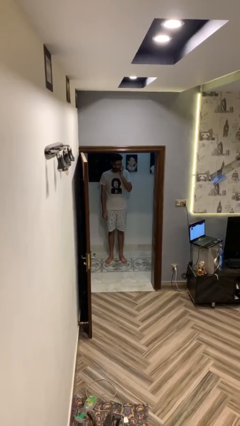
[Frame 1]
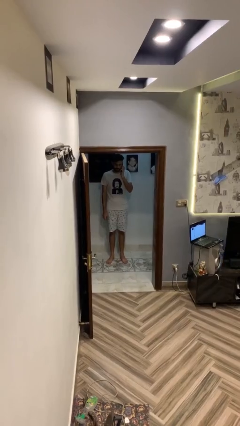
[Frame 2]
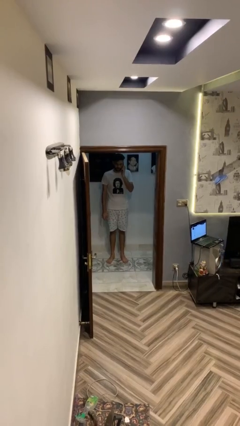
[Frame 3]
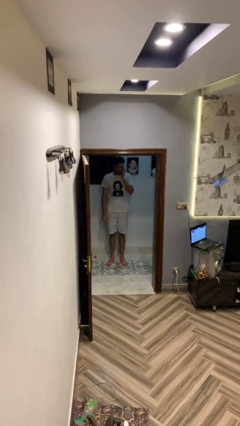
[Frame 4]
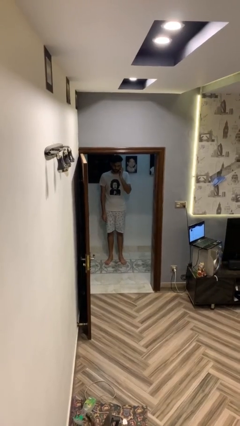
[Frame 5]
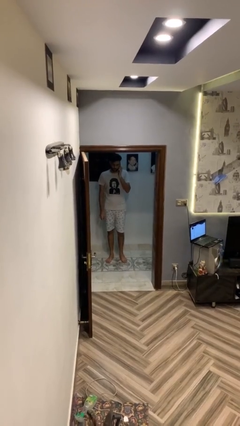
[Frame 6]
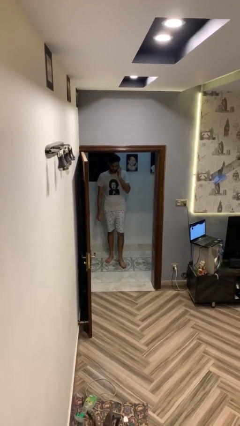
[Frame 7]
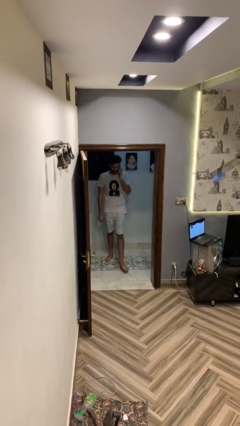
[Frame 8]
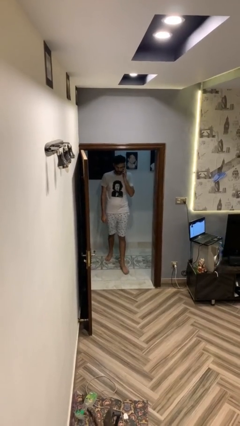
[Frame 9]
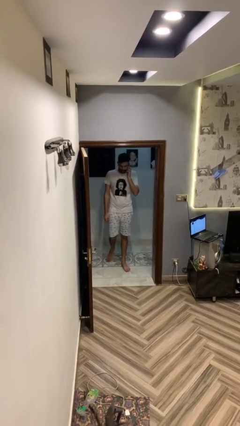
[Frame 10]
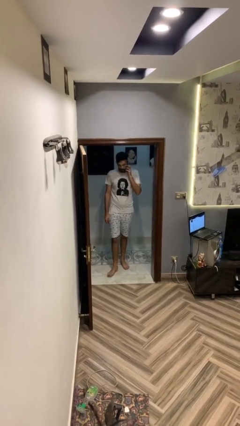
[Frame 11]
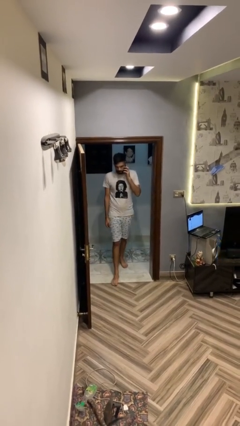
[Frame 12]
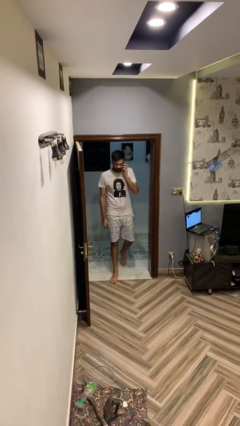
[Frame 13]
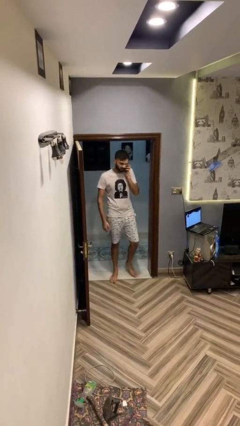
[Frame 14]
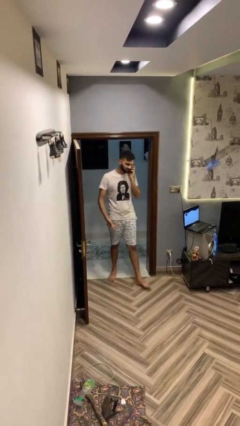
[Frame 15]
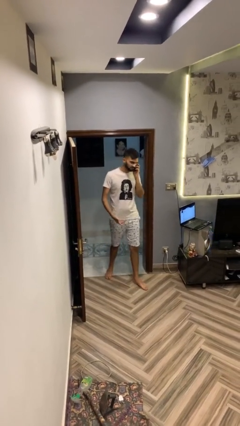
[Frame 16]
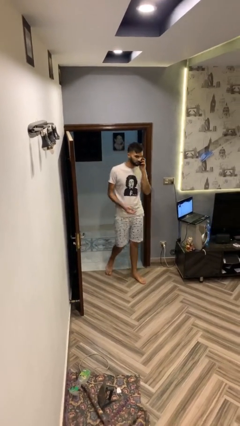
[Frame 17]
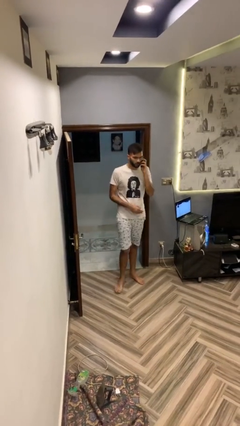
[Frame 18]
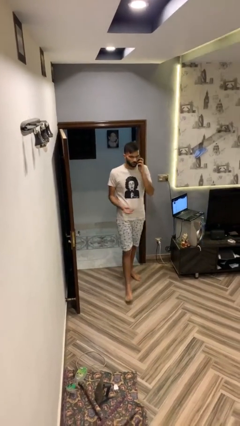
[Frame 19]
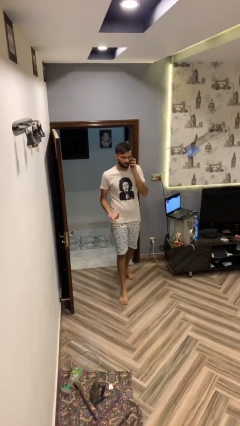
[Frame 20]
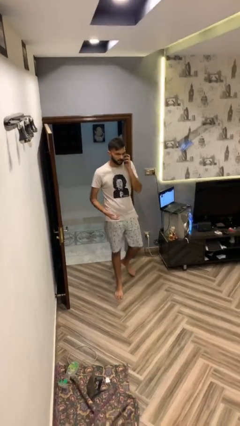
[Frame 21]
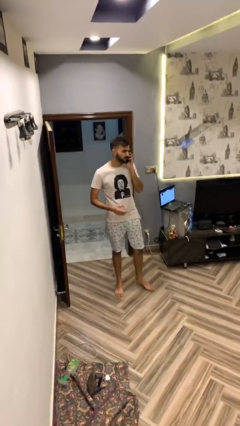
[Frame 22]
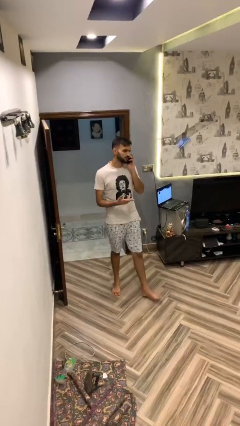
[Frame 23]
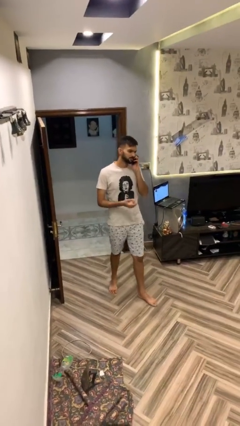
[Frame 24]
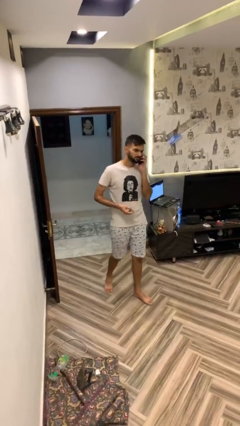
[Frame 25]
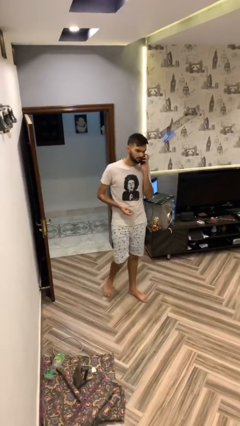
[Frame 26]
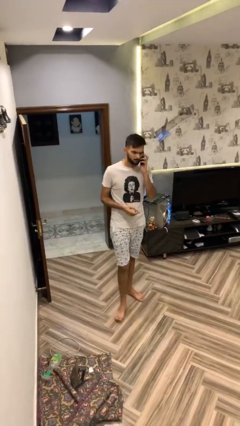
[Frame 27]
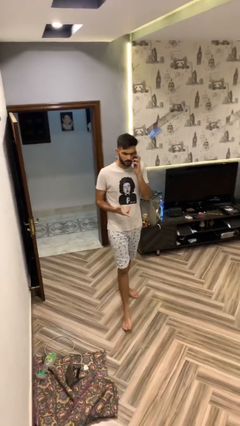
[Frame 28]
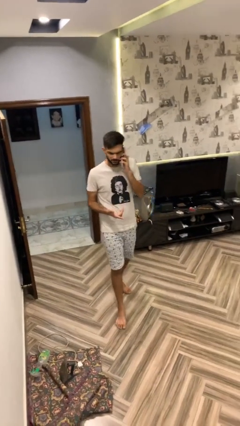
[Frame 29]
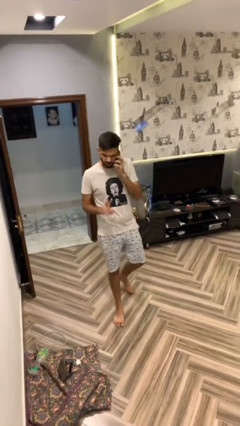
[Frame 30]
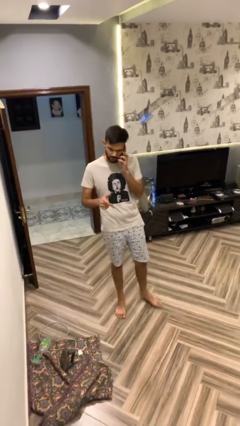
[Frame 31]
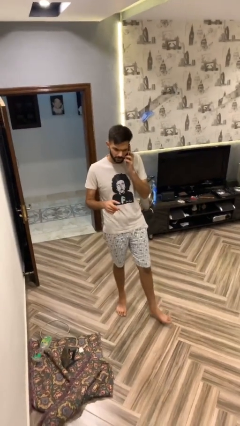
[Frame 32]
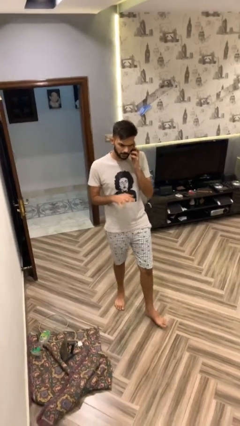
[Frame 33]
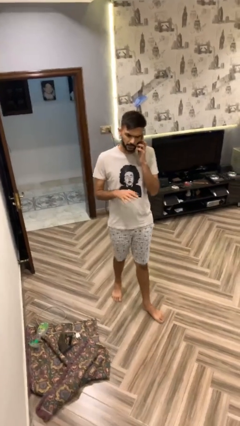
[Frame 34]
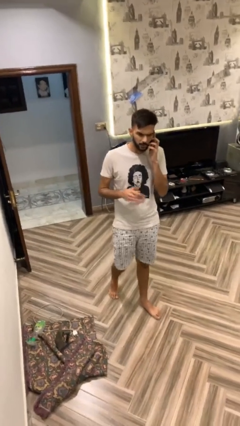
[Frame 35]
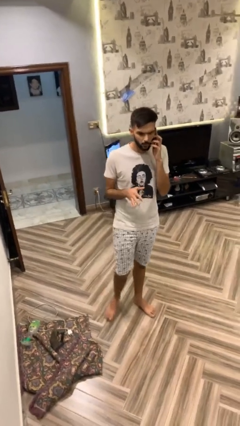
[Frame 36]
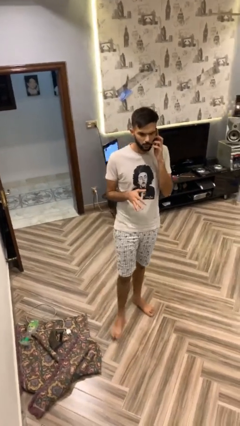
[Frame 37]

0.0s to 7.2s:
person enters scene through structure

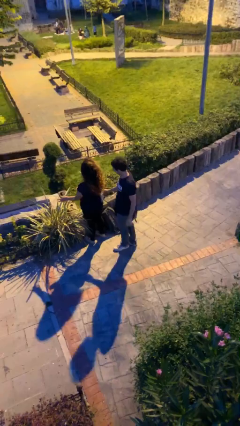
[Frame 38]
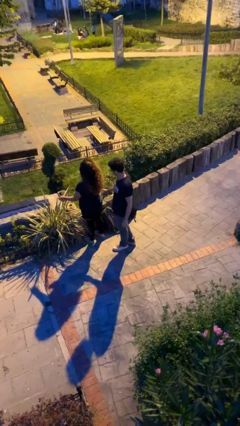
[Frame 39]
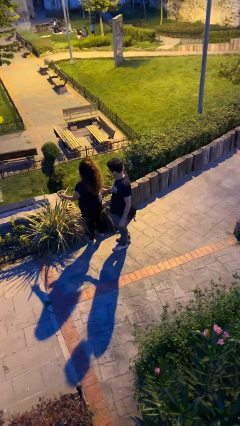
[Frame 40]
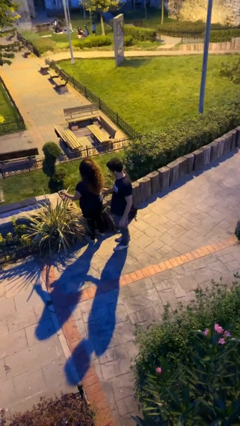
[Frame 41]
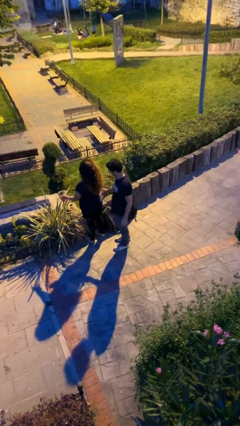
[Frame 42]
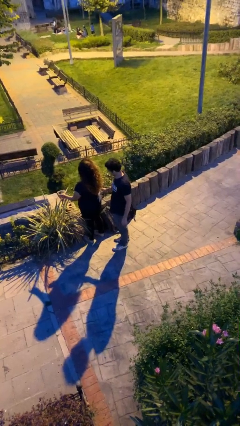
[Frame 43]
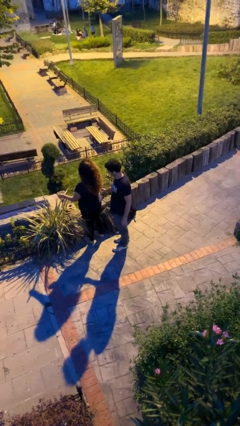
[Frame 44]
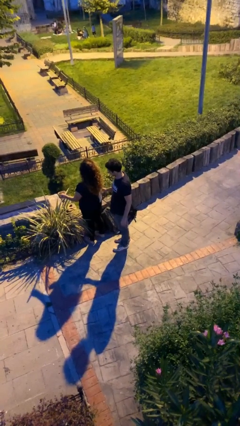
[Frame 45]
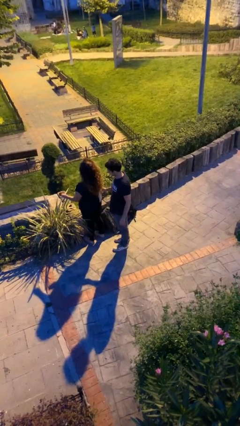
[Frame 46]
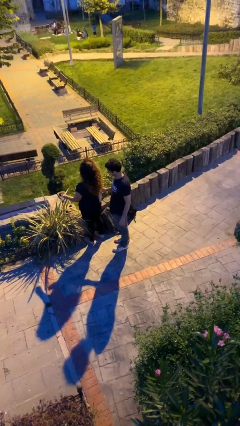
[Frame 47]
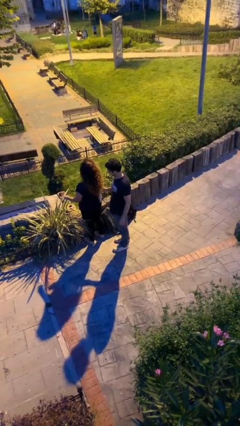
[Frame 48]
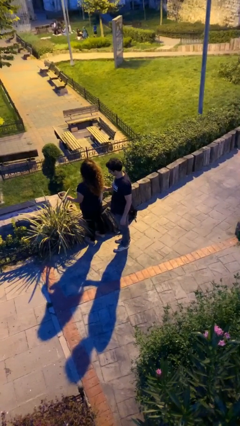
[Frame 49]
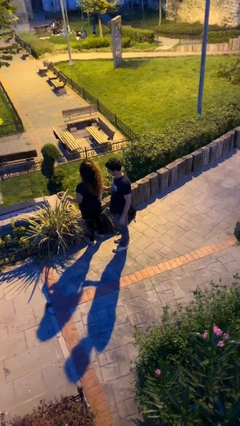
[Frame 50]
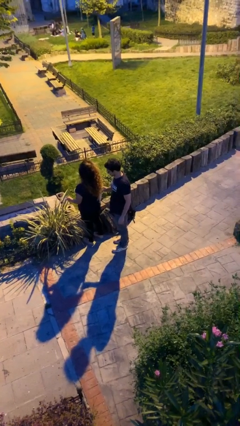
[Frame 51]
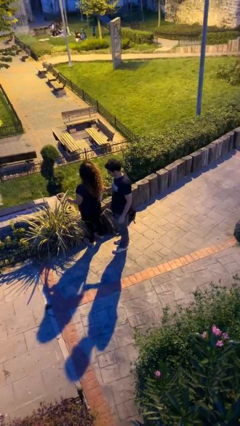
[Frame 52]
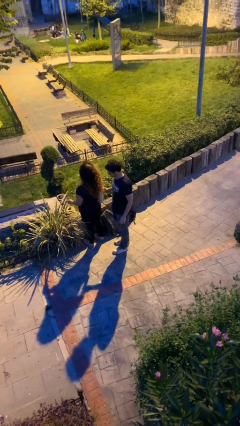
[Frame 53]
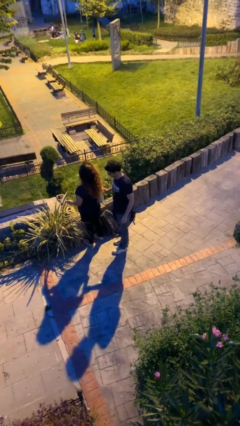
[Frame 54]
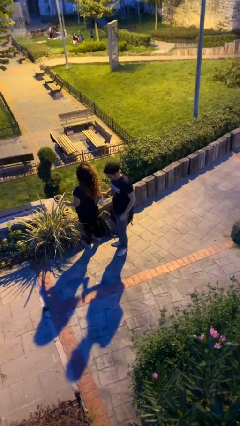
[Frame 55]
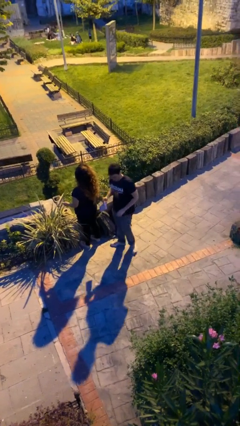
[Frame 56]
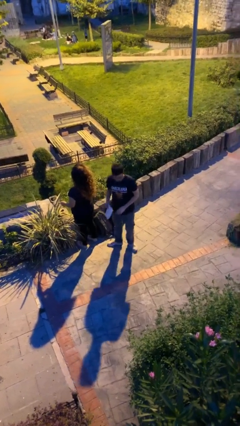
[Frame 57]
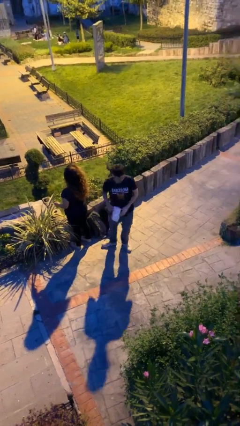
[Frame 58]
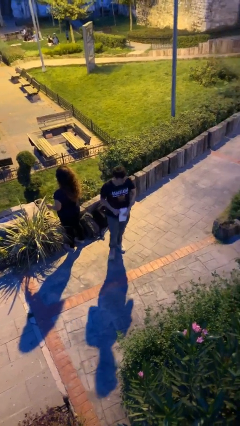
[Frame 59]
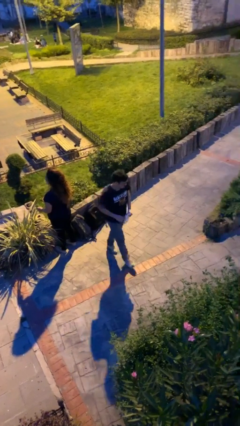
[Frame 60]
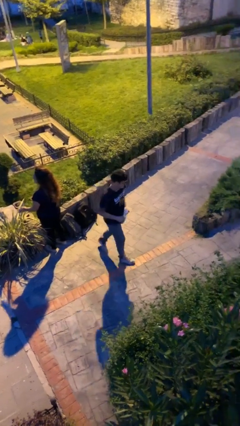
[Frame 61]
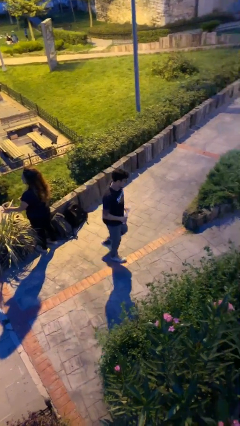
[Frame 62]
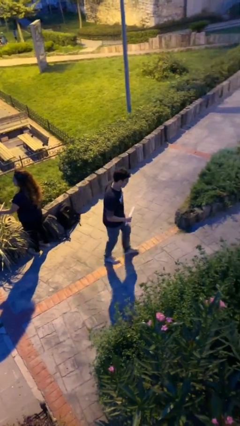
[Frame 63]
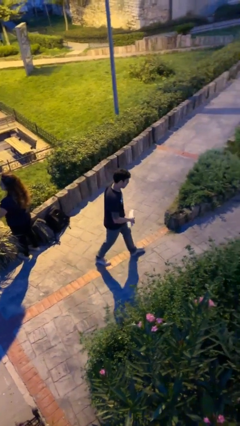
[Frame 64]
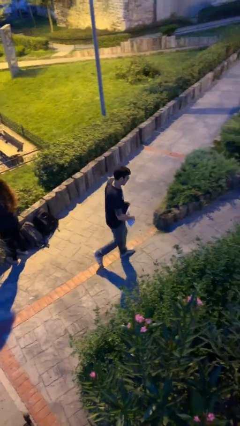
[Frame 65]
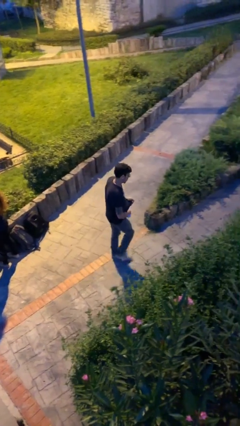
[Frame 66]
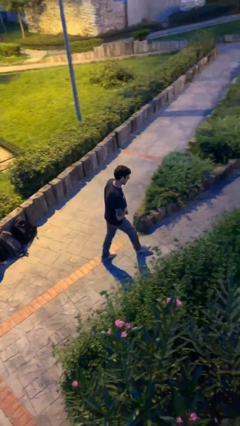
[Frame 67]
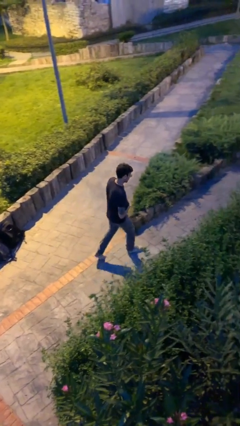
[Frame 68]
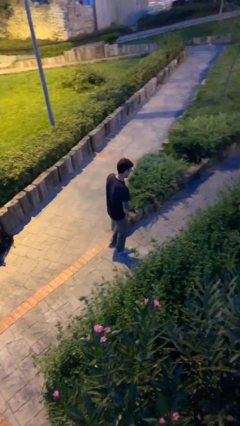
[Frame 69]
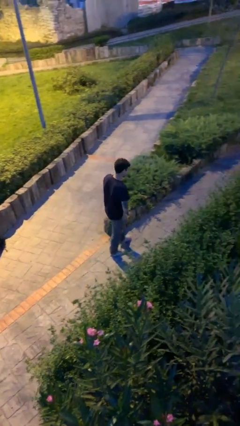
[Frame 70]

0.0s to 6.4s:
person steals object from person

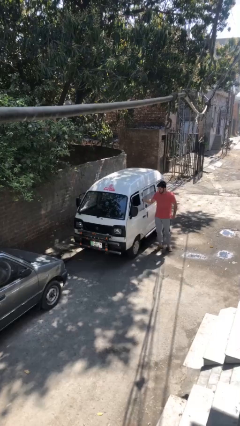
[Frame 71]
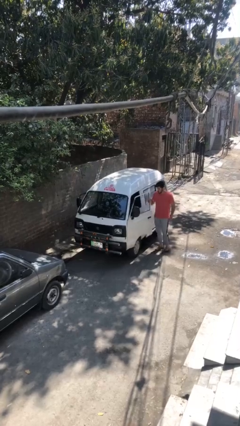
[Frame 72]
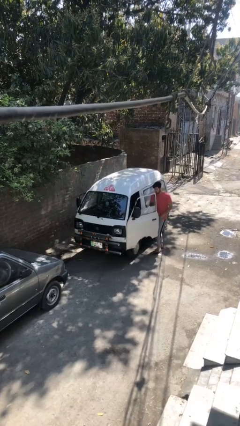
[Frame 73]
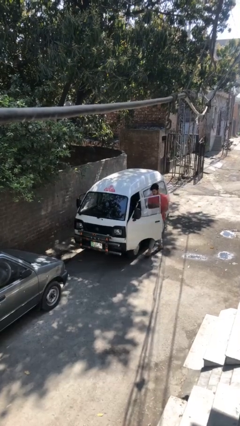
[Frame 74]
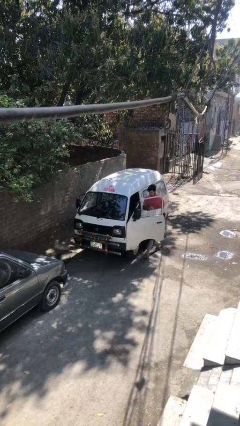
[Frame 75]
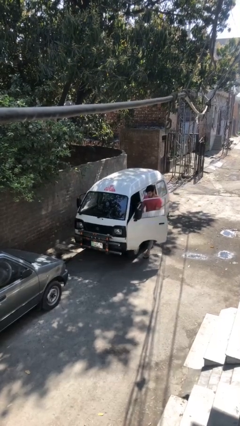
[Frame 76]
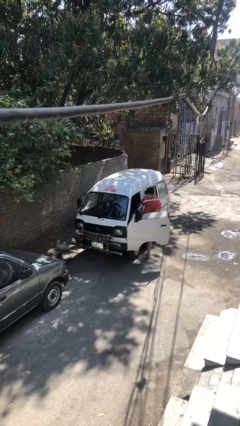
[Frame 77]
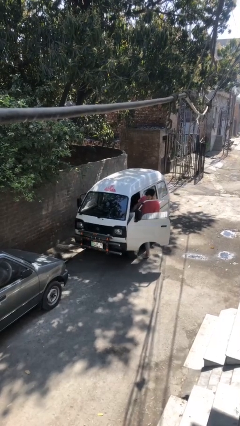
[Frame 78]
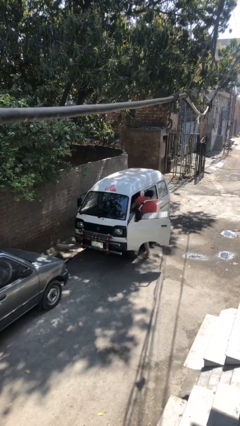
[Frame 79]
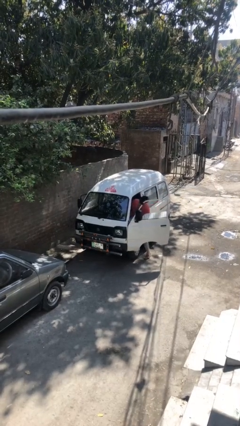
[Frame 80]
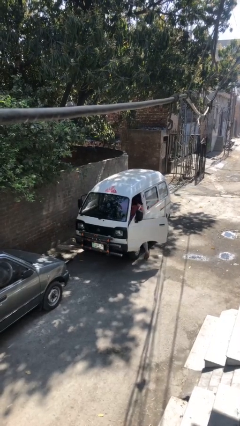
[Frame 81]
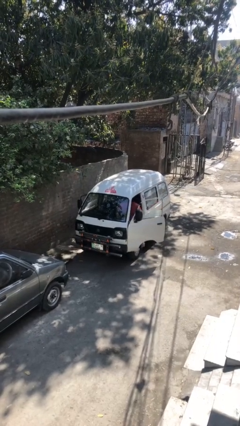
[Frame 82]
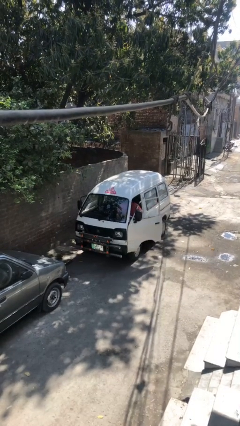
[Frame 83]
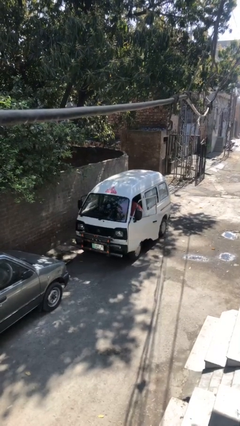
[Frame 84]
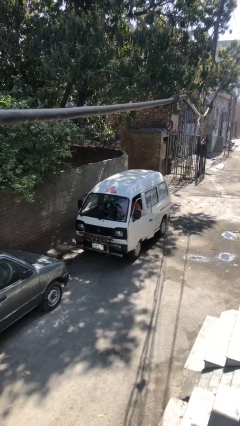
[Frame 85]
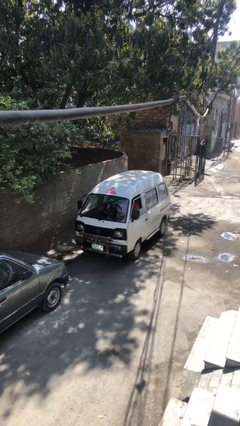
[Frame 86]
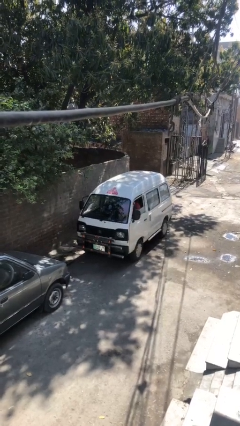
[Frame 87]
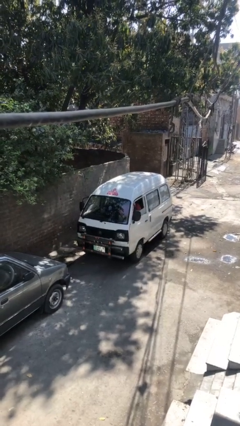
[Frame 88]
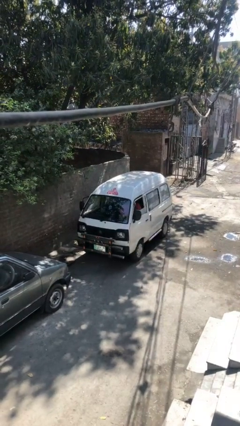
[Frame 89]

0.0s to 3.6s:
car picks up person

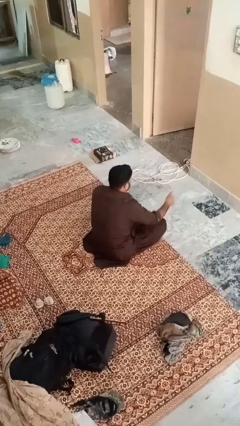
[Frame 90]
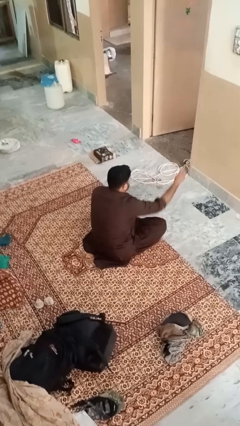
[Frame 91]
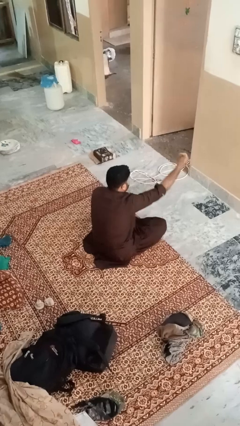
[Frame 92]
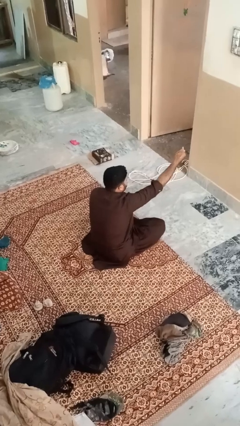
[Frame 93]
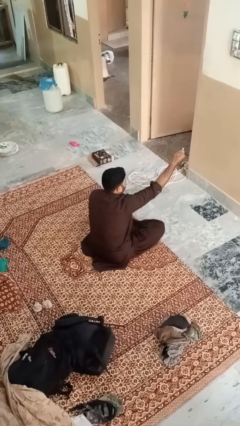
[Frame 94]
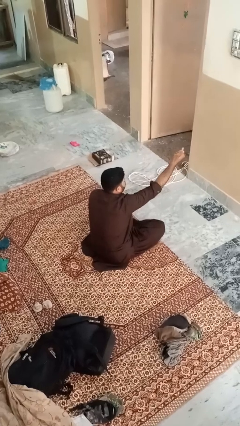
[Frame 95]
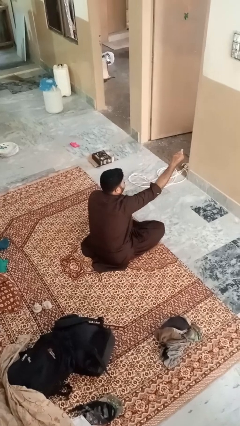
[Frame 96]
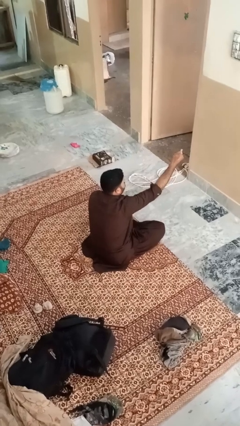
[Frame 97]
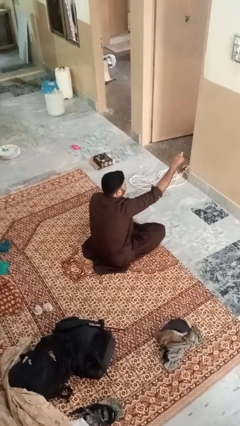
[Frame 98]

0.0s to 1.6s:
person gestures hang loose
